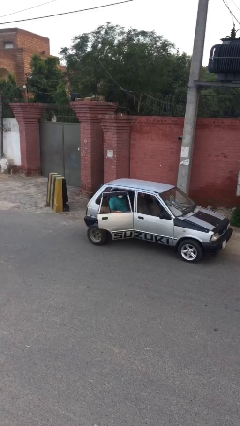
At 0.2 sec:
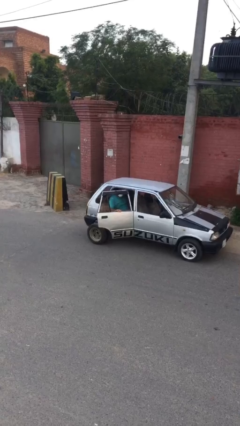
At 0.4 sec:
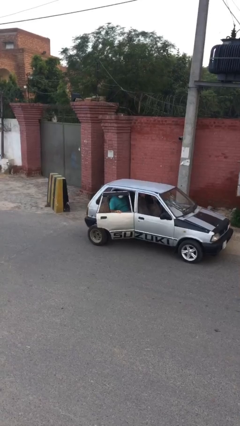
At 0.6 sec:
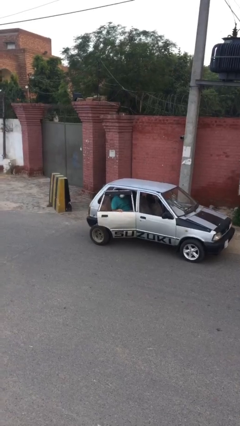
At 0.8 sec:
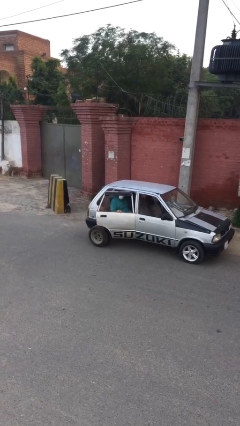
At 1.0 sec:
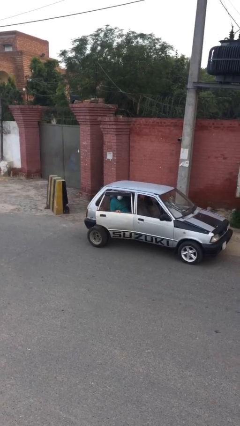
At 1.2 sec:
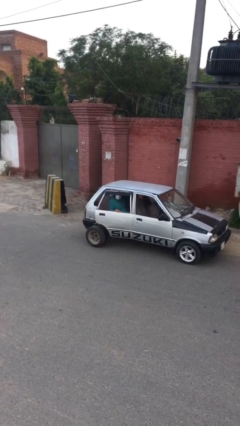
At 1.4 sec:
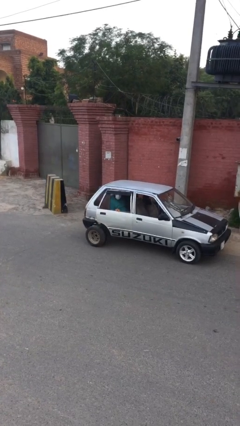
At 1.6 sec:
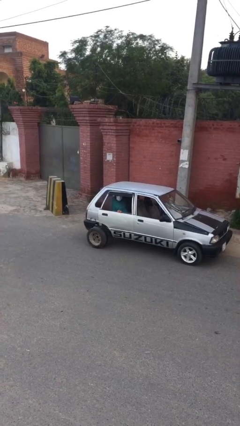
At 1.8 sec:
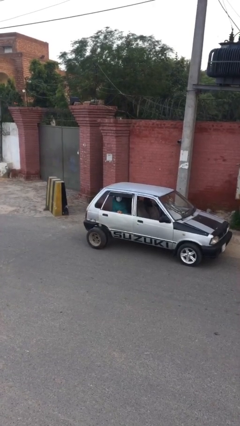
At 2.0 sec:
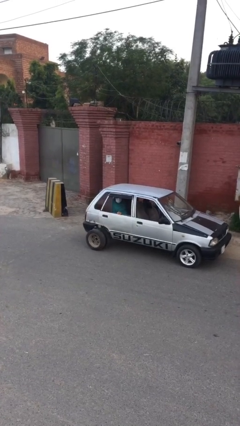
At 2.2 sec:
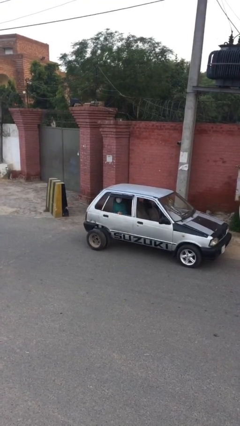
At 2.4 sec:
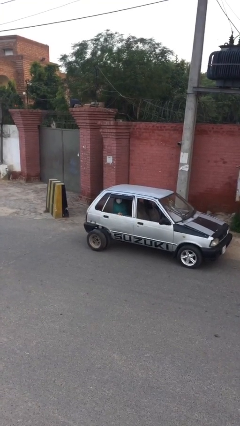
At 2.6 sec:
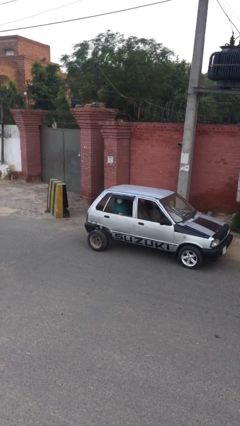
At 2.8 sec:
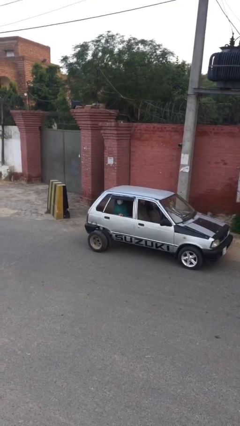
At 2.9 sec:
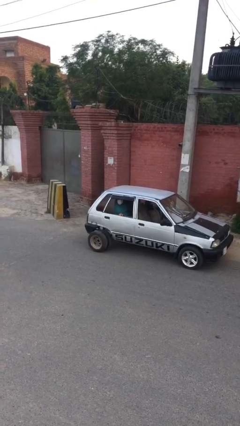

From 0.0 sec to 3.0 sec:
person closes car door

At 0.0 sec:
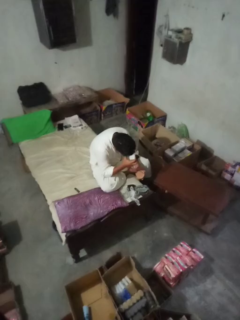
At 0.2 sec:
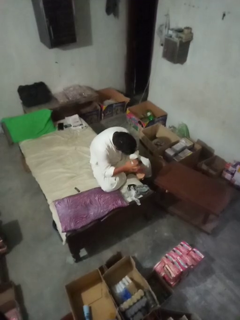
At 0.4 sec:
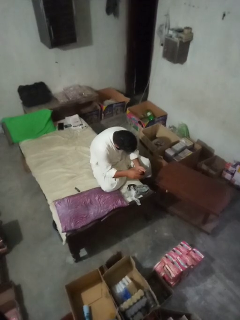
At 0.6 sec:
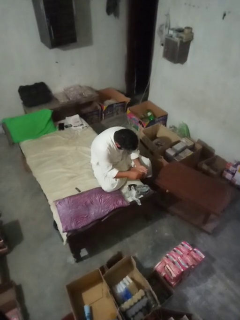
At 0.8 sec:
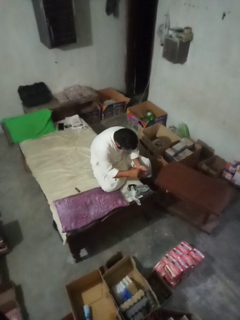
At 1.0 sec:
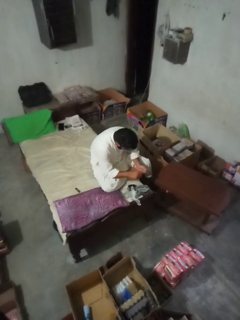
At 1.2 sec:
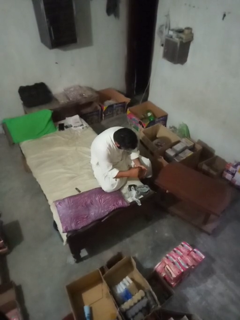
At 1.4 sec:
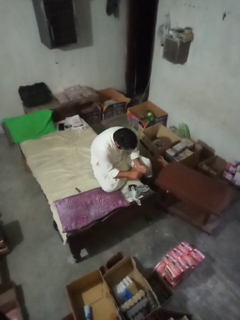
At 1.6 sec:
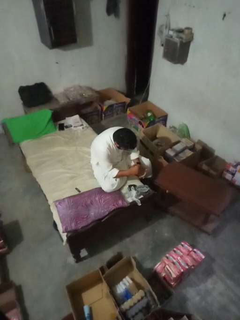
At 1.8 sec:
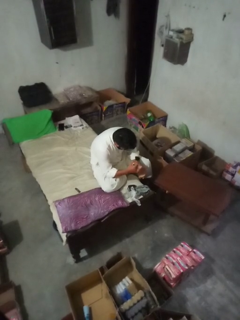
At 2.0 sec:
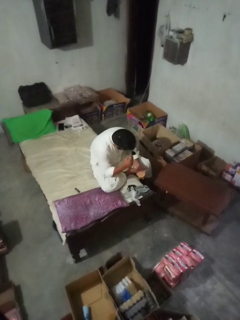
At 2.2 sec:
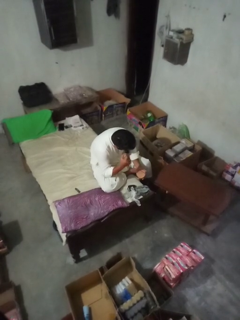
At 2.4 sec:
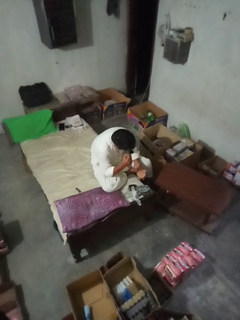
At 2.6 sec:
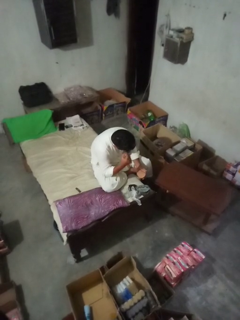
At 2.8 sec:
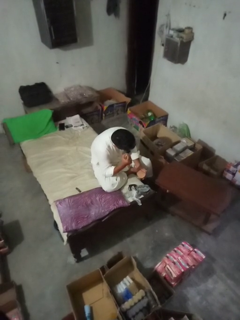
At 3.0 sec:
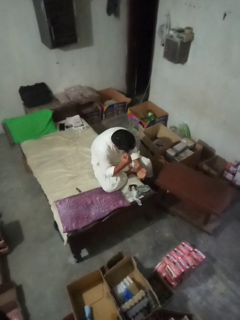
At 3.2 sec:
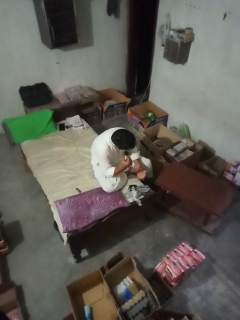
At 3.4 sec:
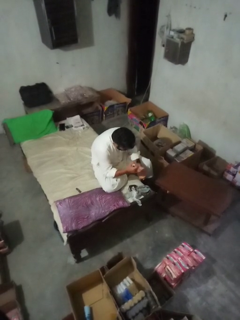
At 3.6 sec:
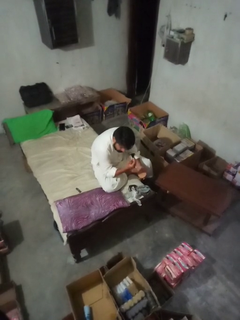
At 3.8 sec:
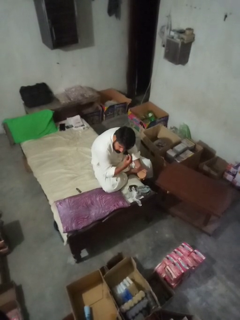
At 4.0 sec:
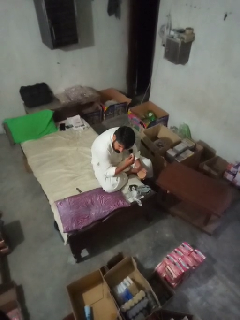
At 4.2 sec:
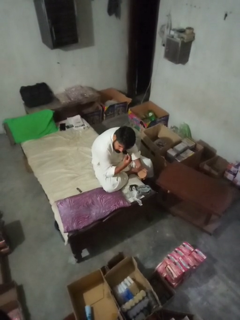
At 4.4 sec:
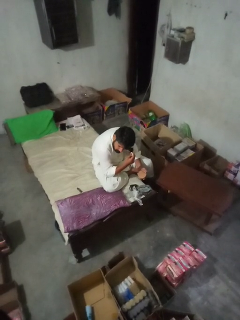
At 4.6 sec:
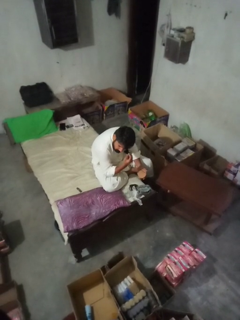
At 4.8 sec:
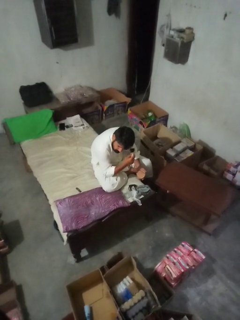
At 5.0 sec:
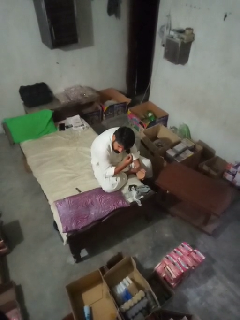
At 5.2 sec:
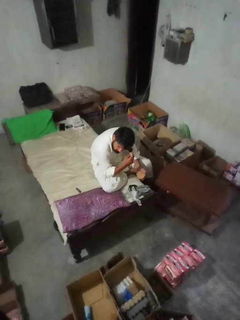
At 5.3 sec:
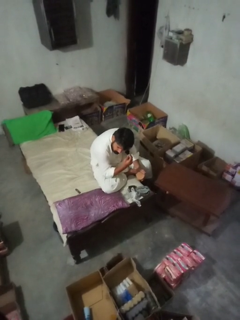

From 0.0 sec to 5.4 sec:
person applies eye makeup

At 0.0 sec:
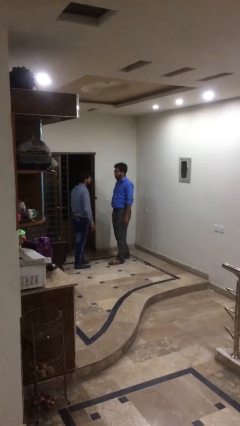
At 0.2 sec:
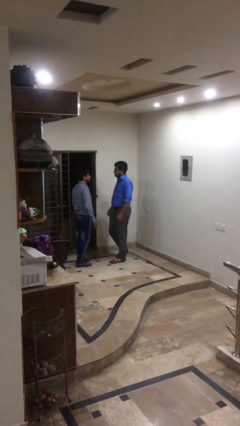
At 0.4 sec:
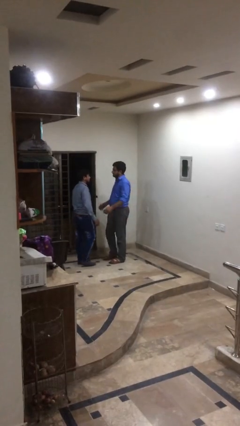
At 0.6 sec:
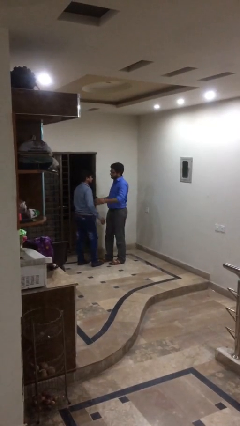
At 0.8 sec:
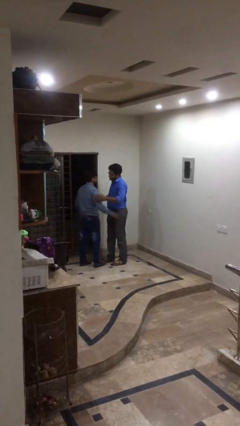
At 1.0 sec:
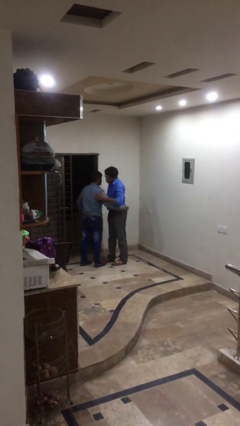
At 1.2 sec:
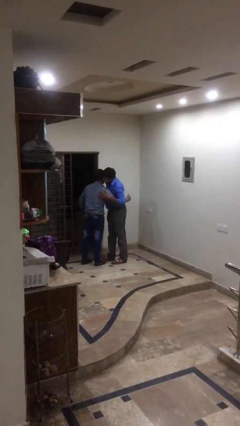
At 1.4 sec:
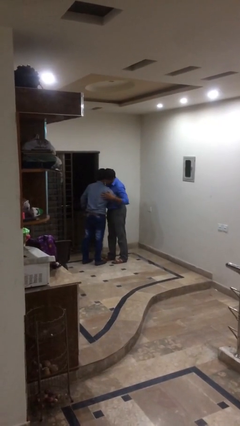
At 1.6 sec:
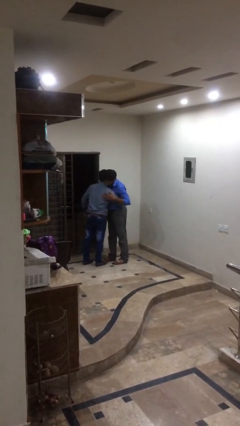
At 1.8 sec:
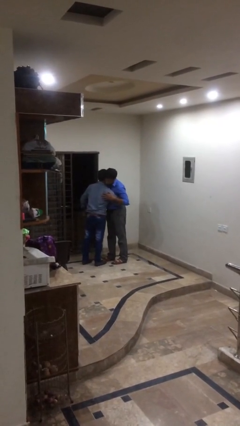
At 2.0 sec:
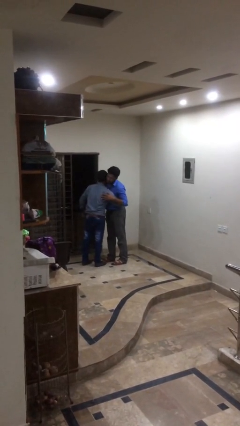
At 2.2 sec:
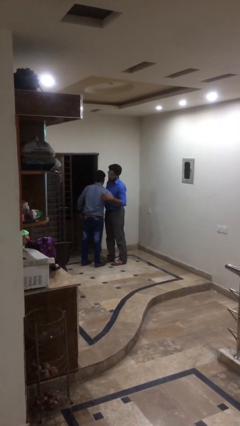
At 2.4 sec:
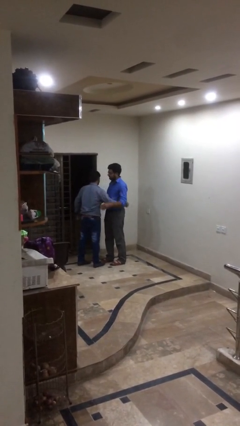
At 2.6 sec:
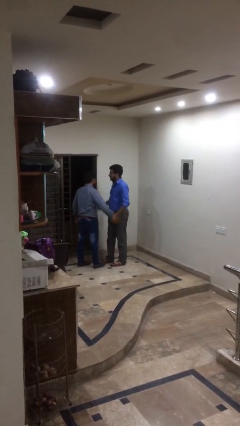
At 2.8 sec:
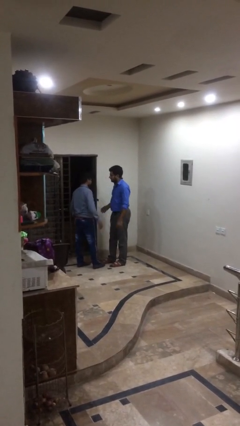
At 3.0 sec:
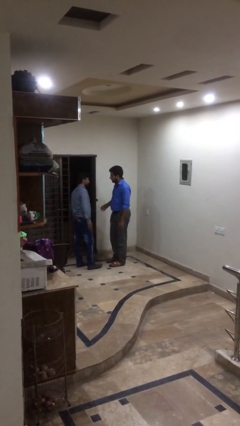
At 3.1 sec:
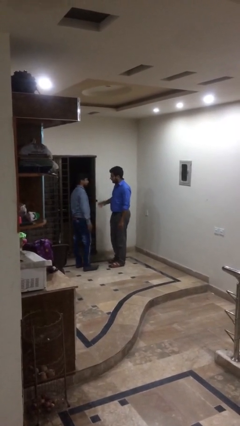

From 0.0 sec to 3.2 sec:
person embraces person

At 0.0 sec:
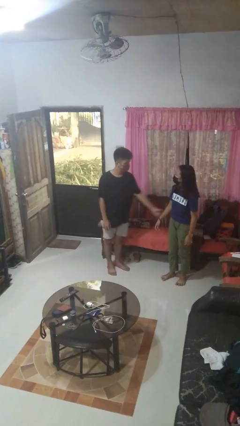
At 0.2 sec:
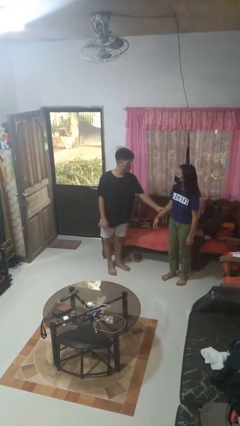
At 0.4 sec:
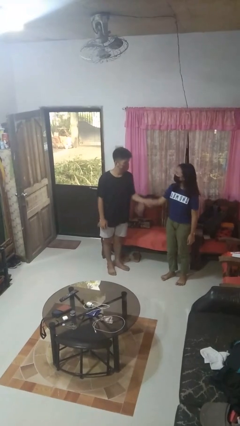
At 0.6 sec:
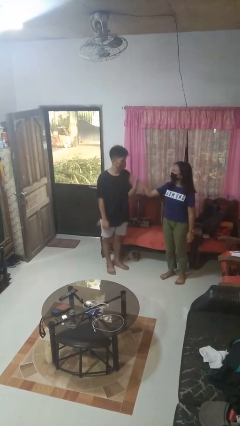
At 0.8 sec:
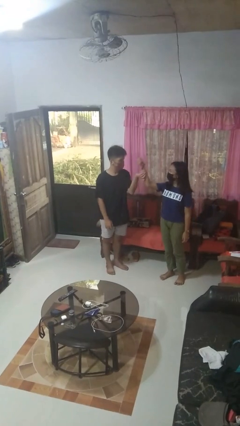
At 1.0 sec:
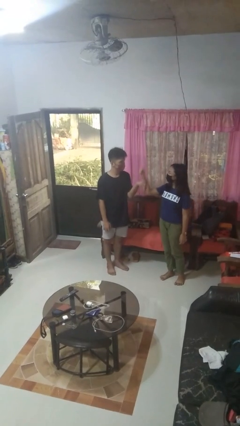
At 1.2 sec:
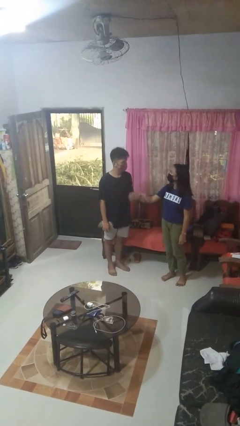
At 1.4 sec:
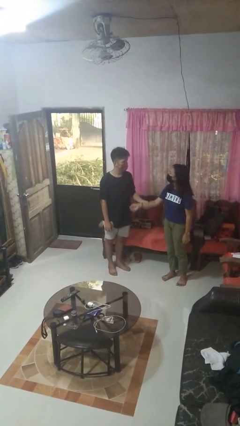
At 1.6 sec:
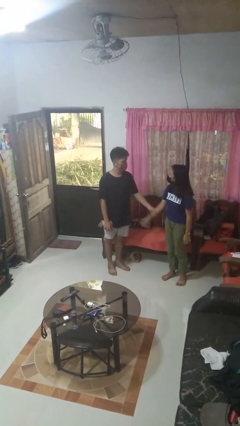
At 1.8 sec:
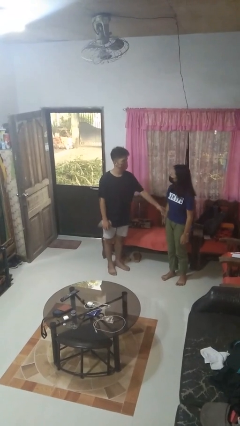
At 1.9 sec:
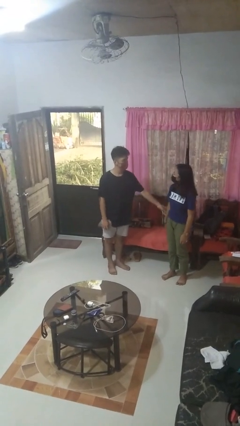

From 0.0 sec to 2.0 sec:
person grabs person by forearm

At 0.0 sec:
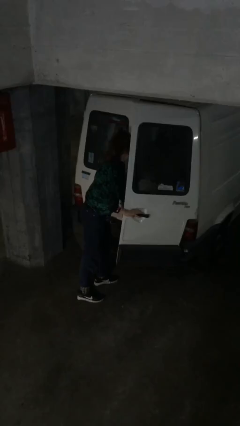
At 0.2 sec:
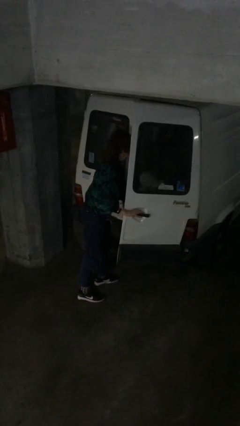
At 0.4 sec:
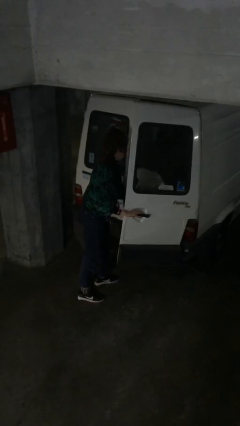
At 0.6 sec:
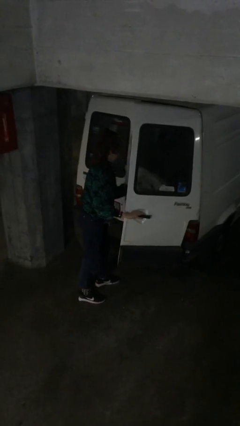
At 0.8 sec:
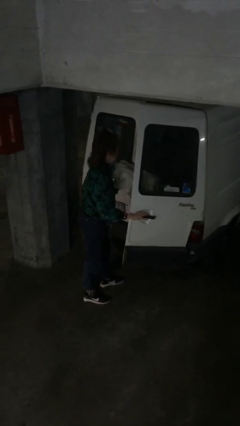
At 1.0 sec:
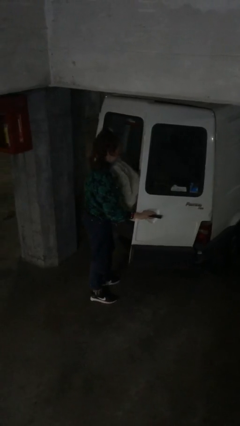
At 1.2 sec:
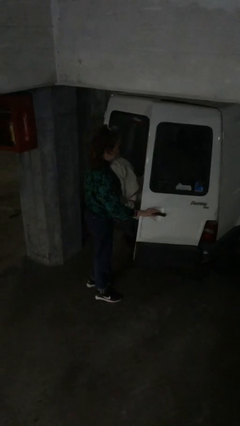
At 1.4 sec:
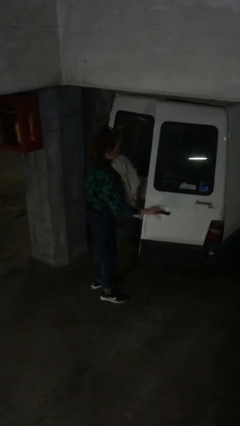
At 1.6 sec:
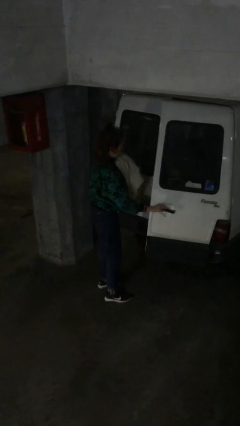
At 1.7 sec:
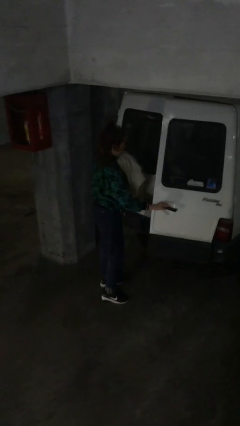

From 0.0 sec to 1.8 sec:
person unloads car

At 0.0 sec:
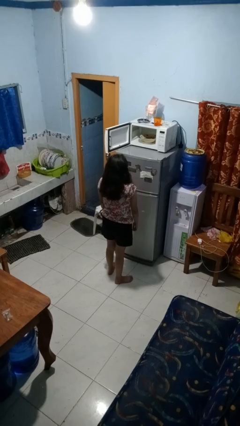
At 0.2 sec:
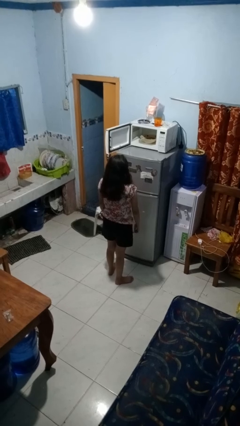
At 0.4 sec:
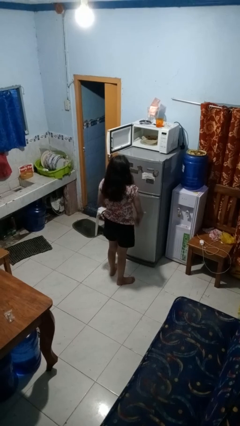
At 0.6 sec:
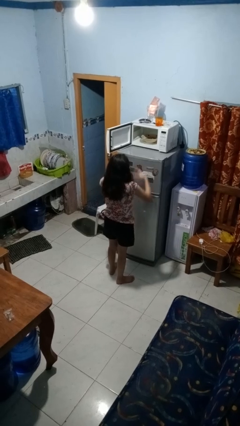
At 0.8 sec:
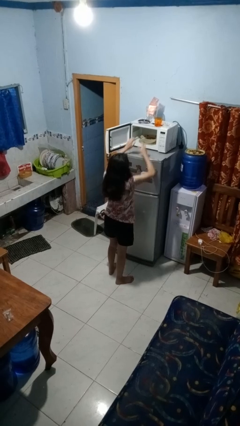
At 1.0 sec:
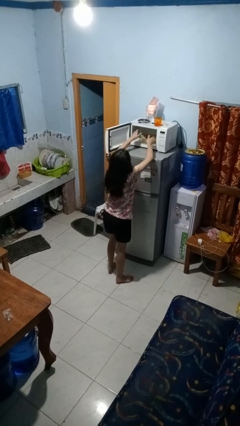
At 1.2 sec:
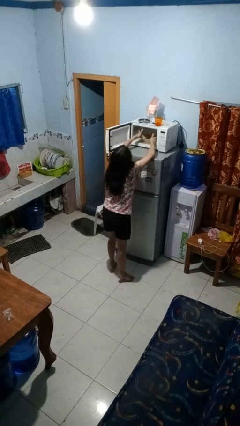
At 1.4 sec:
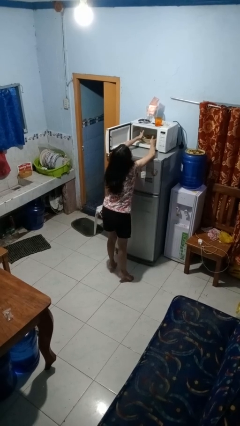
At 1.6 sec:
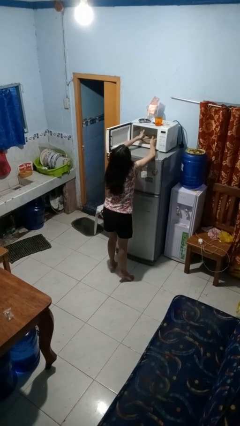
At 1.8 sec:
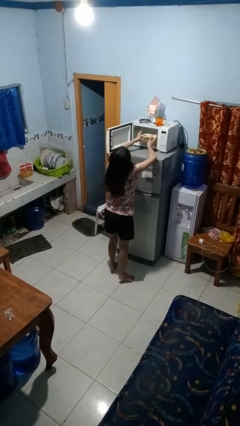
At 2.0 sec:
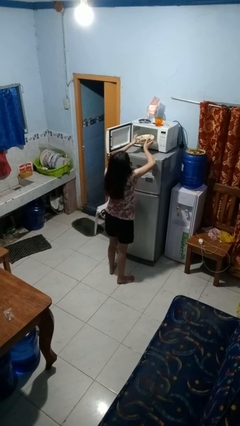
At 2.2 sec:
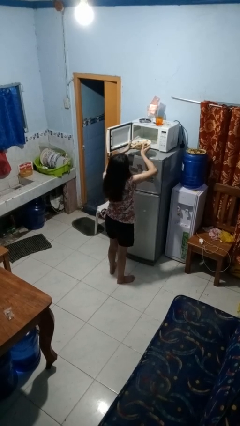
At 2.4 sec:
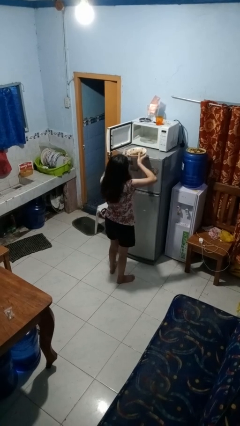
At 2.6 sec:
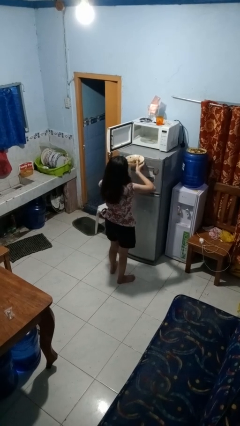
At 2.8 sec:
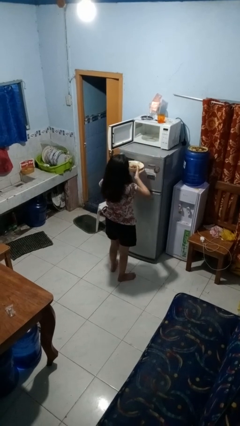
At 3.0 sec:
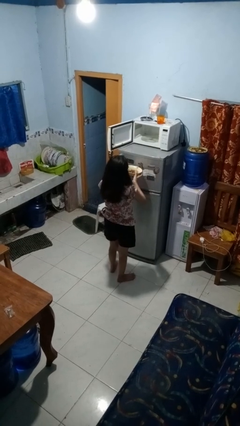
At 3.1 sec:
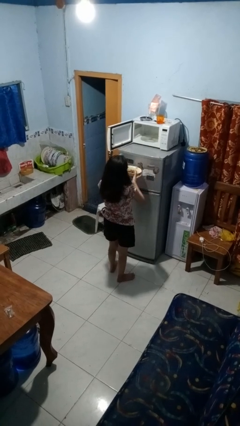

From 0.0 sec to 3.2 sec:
person takes object from microwave
